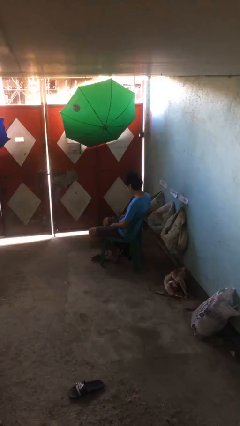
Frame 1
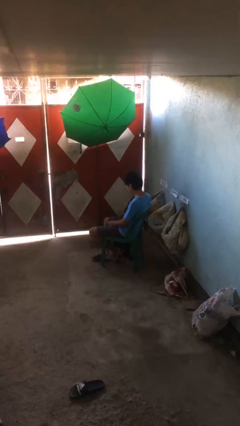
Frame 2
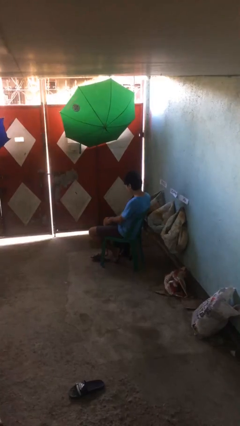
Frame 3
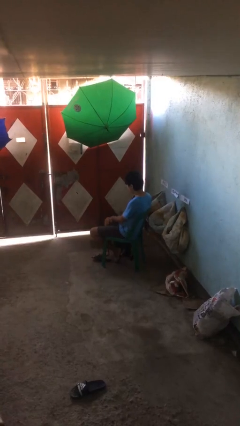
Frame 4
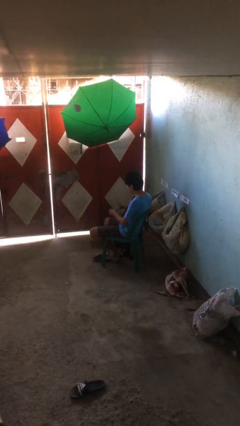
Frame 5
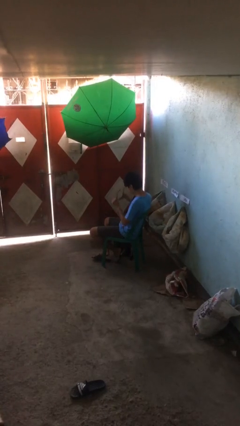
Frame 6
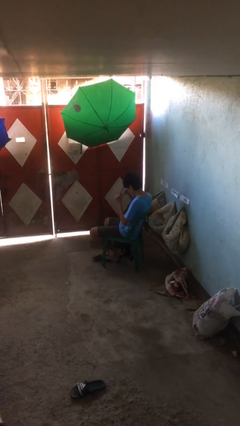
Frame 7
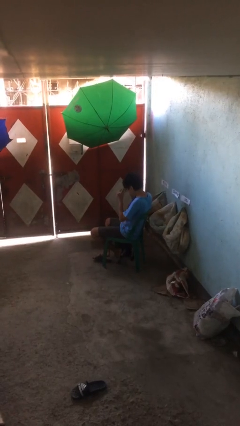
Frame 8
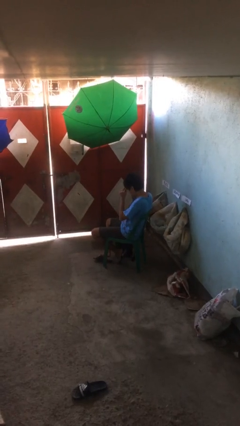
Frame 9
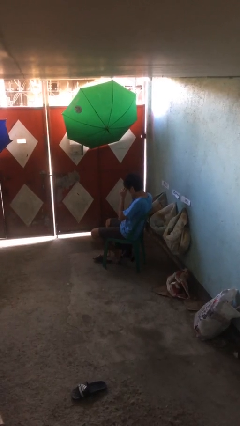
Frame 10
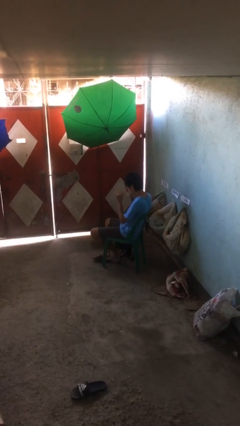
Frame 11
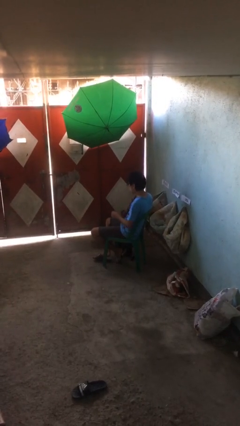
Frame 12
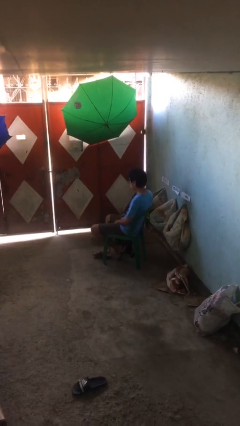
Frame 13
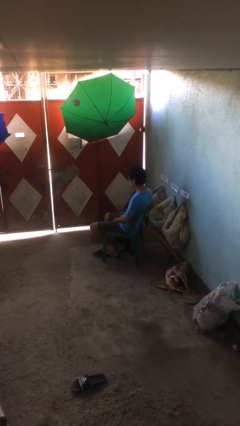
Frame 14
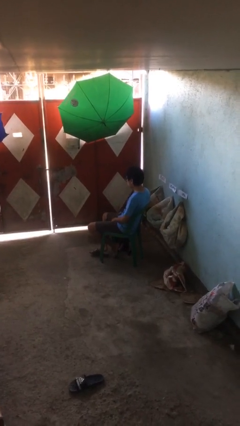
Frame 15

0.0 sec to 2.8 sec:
person puts on glasses

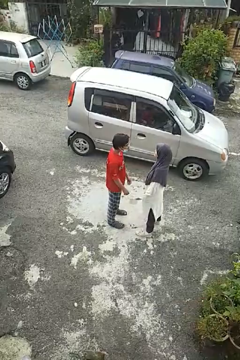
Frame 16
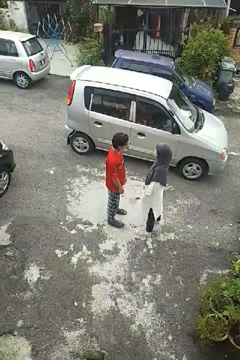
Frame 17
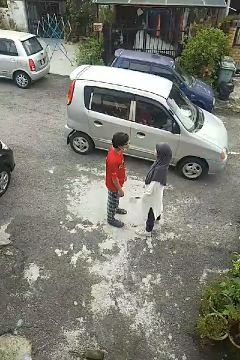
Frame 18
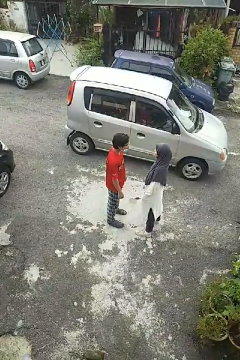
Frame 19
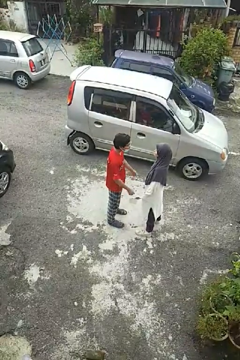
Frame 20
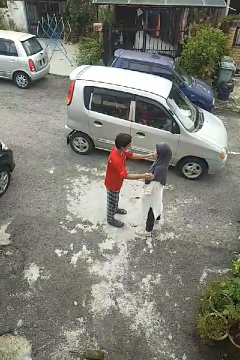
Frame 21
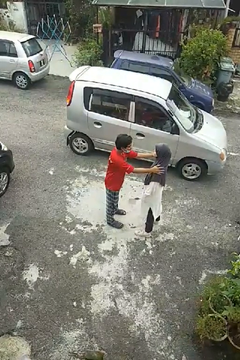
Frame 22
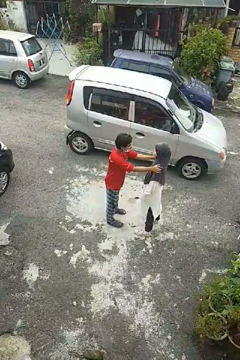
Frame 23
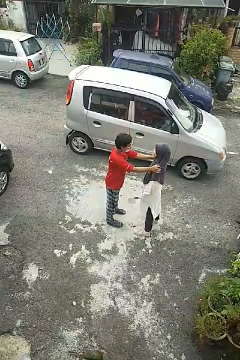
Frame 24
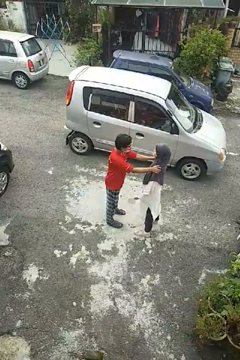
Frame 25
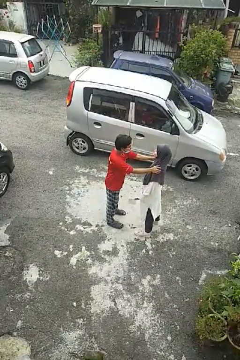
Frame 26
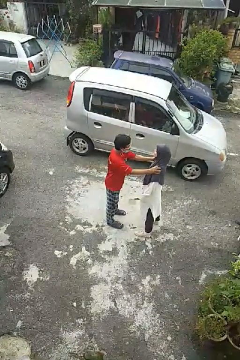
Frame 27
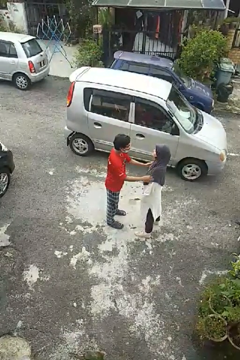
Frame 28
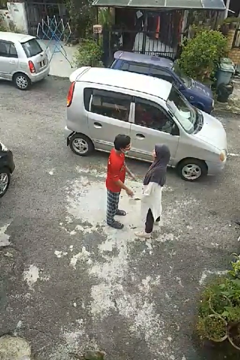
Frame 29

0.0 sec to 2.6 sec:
person pounds shoulders of person

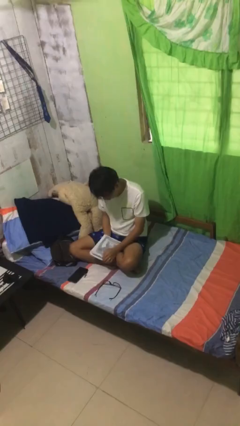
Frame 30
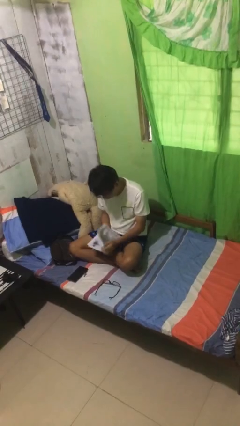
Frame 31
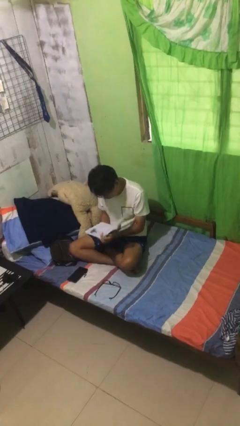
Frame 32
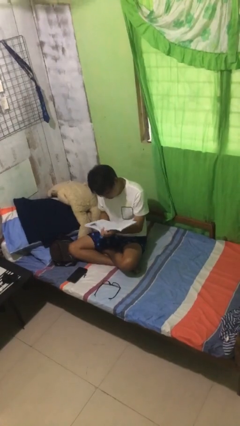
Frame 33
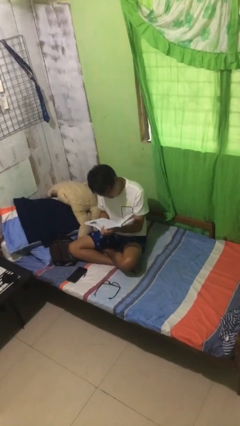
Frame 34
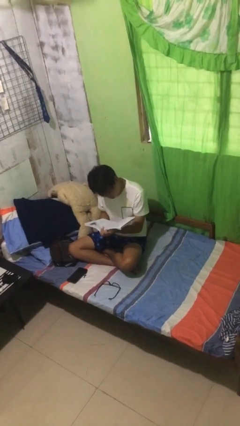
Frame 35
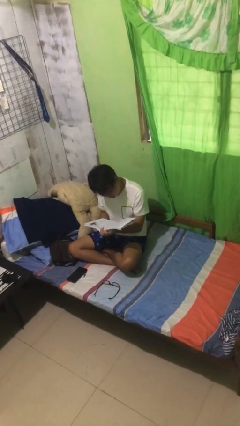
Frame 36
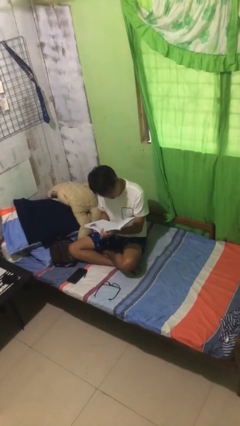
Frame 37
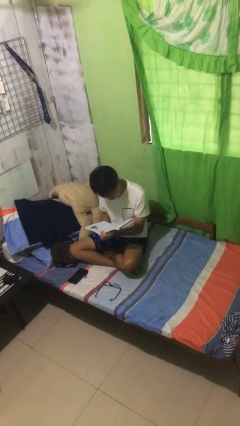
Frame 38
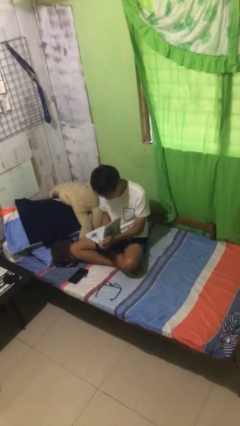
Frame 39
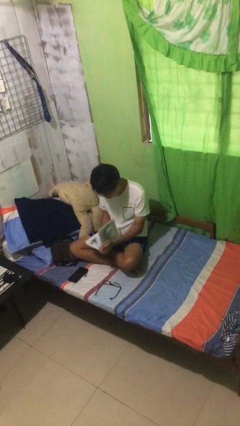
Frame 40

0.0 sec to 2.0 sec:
person reads document

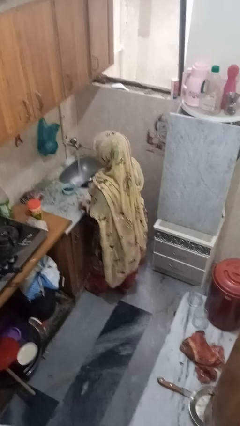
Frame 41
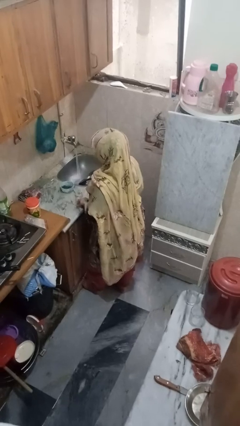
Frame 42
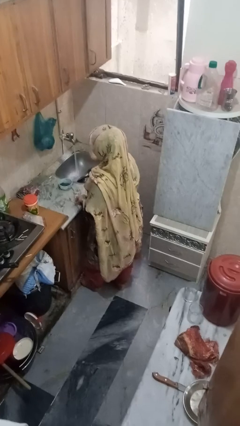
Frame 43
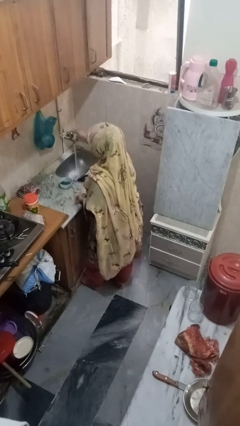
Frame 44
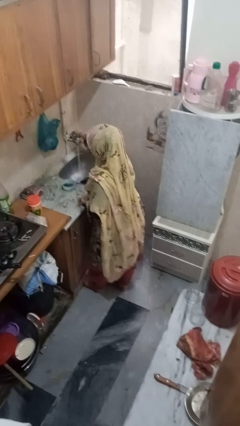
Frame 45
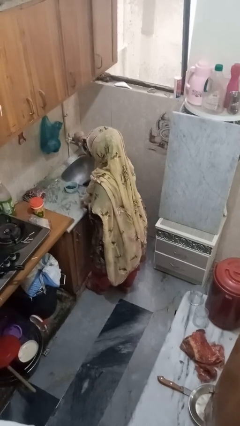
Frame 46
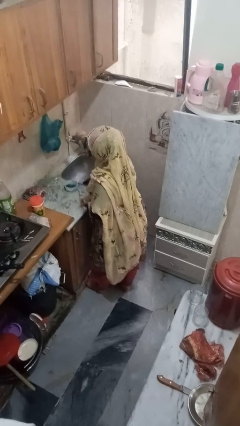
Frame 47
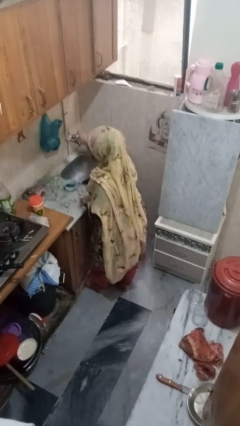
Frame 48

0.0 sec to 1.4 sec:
person turns off faucet

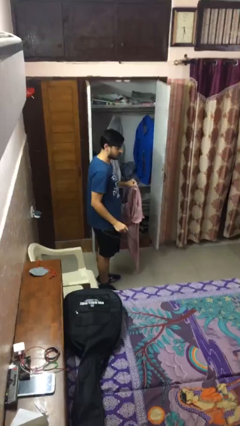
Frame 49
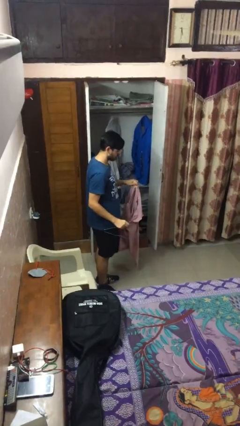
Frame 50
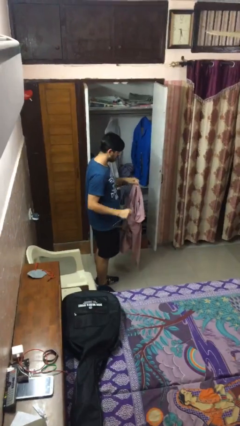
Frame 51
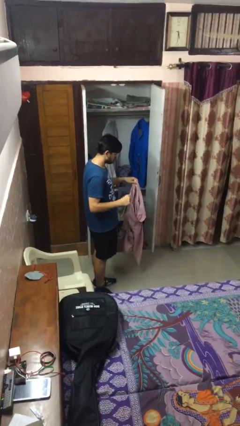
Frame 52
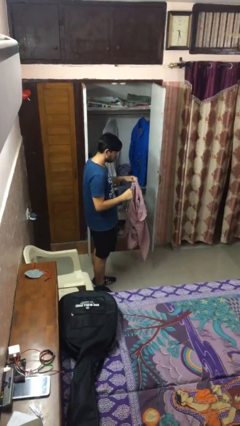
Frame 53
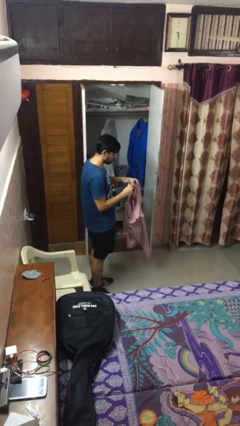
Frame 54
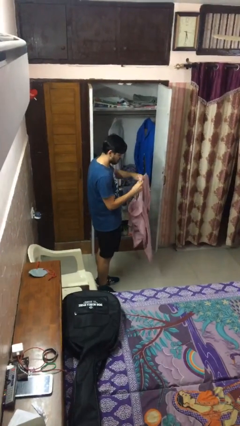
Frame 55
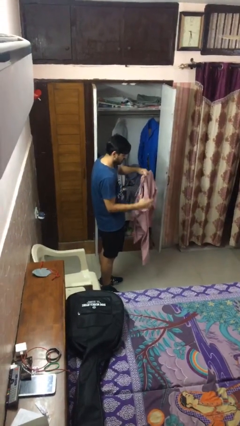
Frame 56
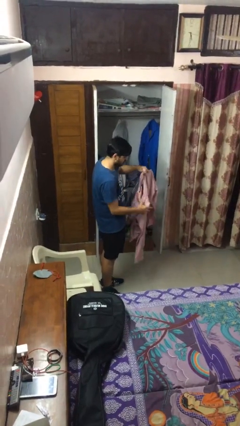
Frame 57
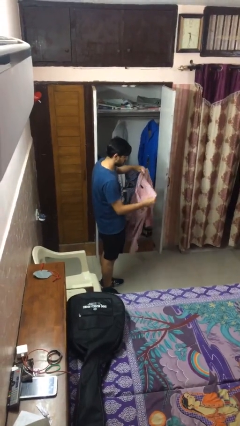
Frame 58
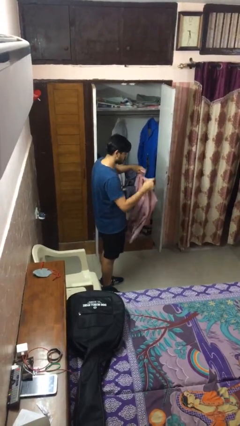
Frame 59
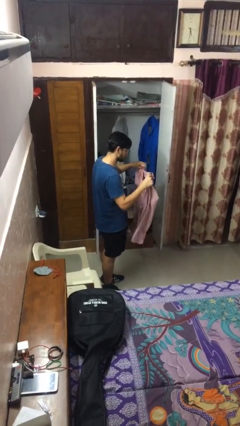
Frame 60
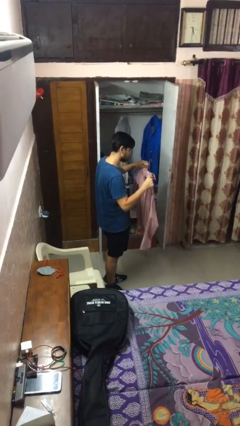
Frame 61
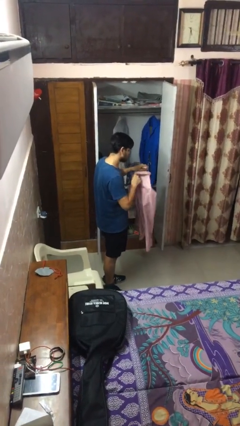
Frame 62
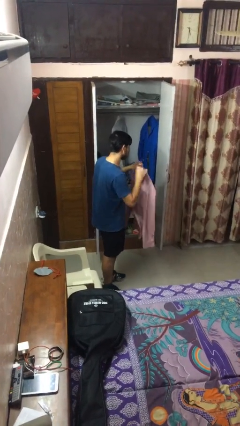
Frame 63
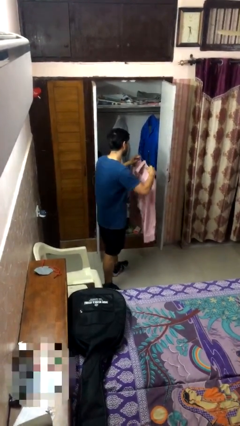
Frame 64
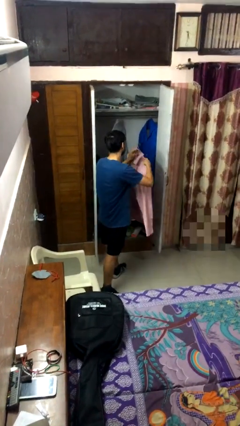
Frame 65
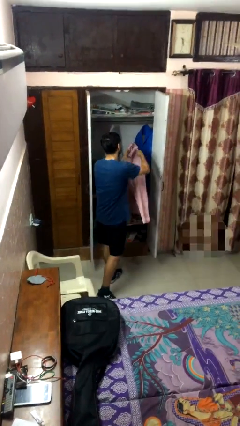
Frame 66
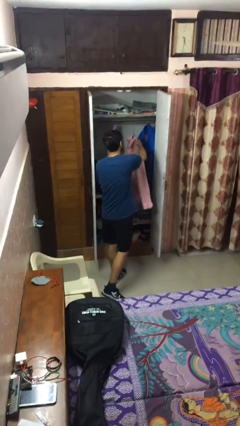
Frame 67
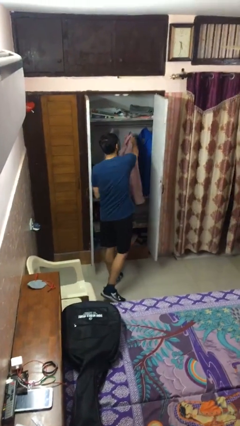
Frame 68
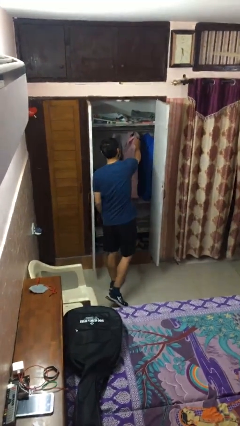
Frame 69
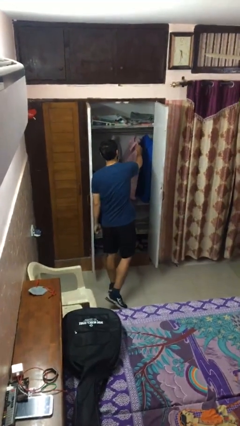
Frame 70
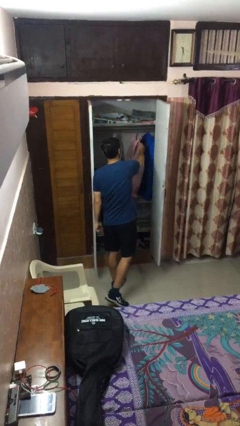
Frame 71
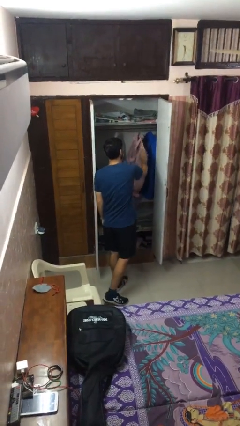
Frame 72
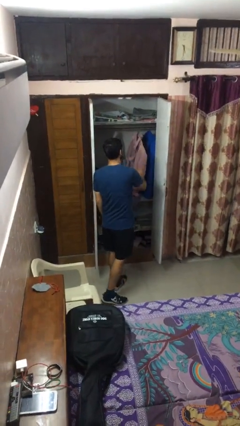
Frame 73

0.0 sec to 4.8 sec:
person puts clothes into closet

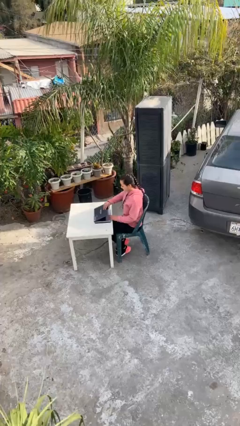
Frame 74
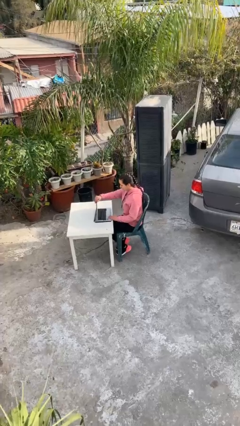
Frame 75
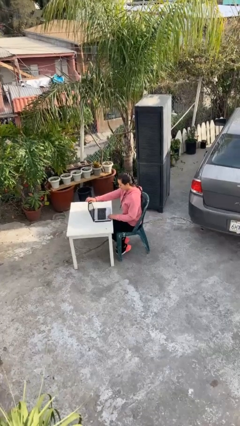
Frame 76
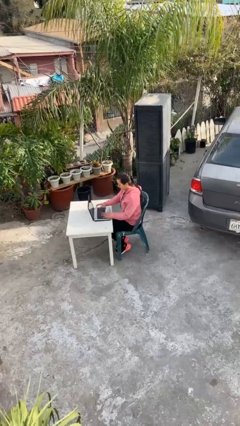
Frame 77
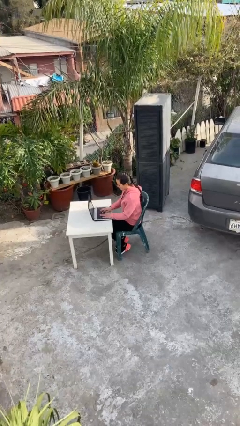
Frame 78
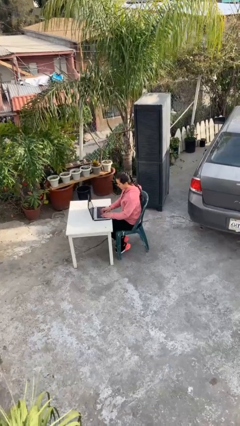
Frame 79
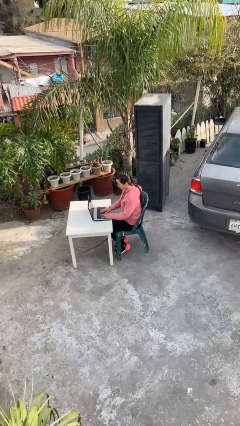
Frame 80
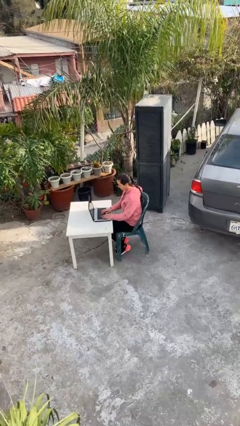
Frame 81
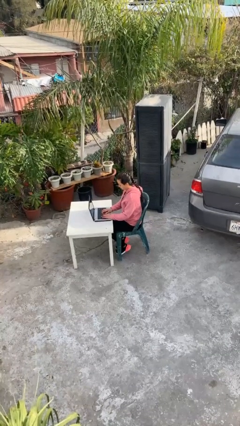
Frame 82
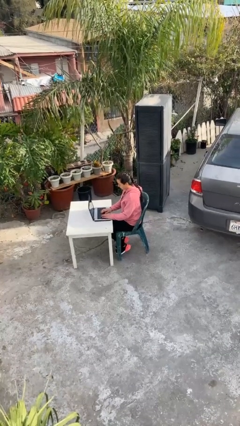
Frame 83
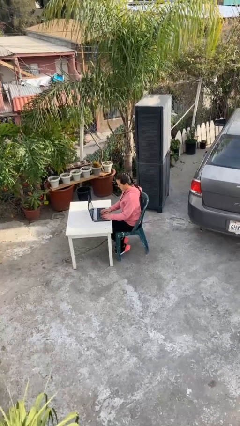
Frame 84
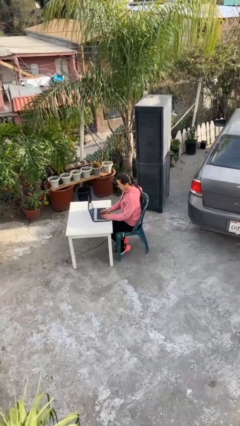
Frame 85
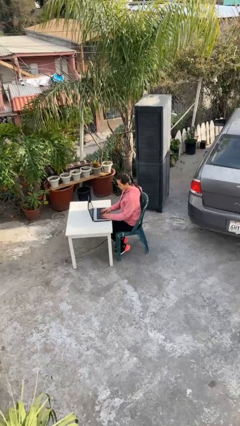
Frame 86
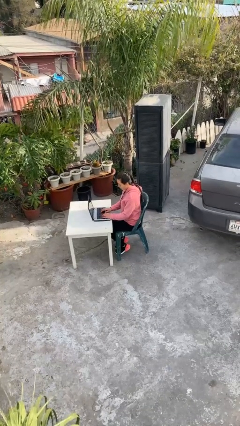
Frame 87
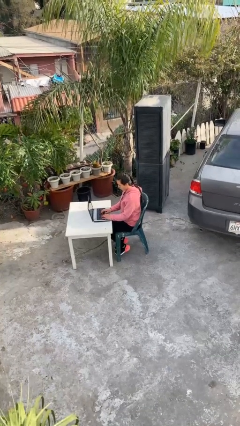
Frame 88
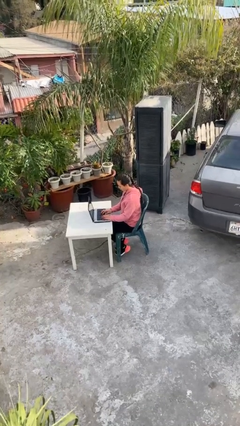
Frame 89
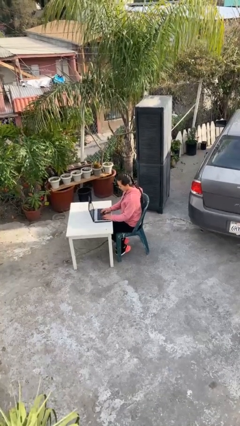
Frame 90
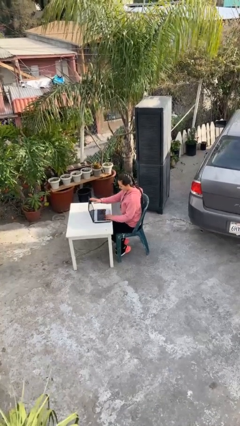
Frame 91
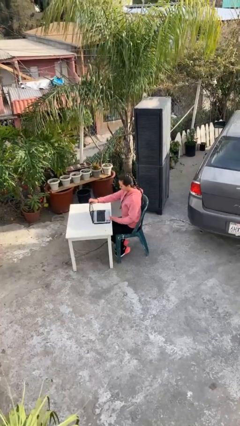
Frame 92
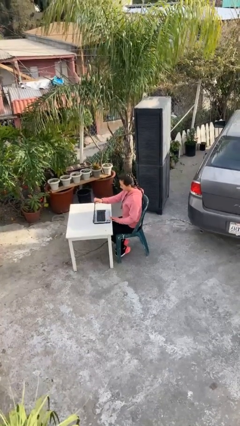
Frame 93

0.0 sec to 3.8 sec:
person interacts with laptop
